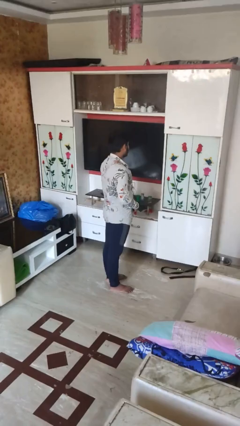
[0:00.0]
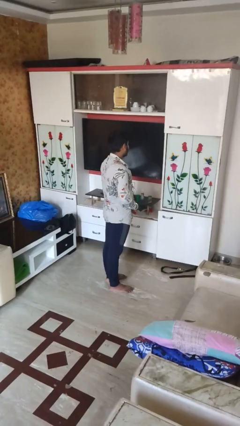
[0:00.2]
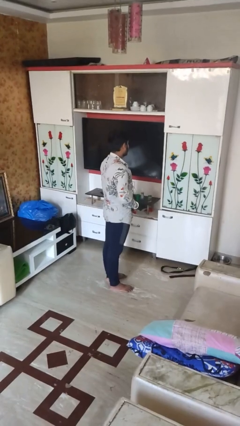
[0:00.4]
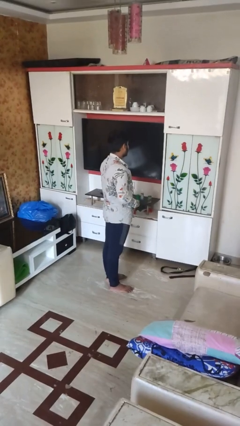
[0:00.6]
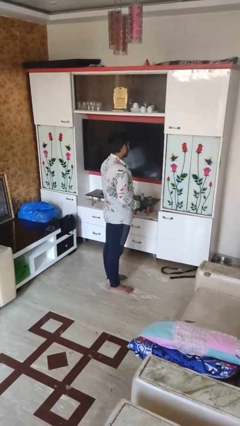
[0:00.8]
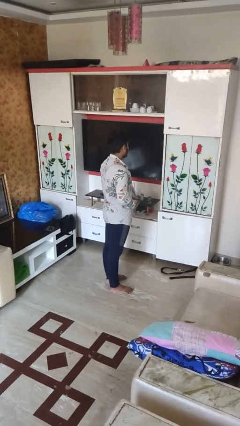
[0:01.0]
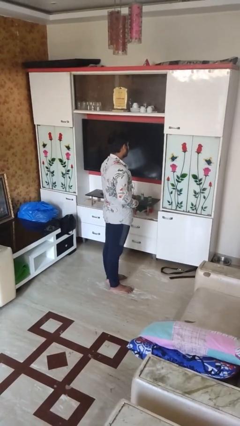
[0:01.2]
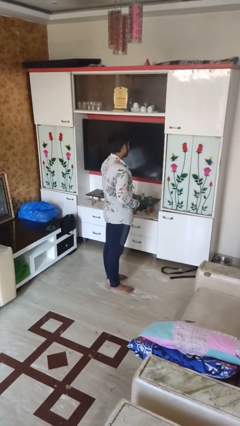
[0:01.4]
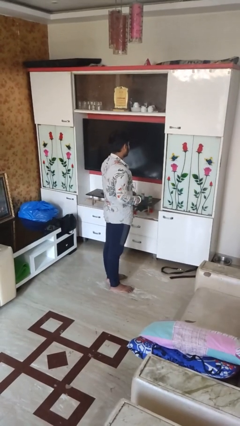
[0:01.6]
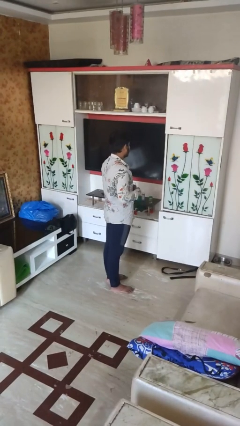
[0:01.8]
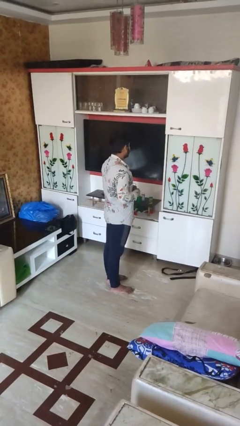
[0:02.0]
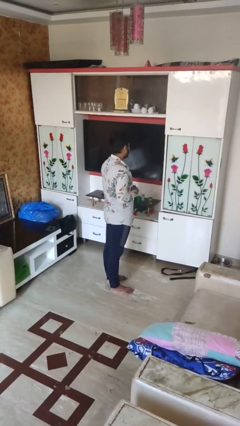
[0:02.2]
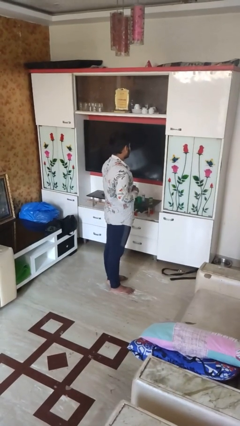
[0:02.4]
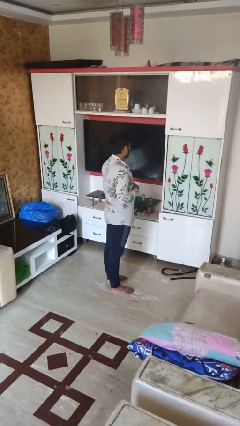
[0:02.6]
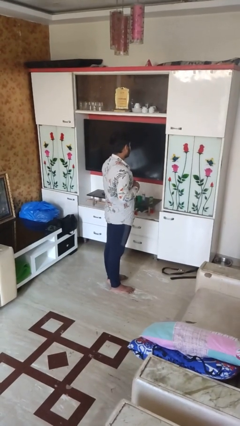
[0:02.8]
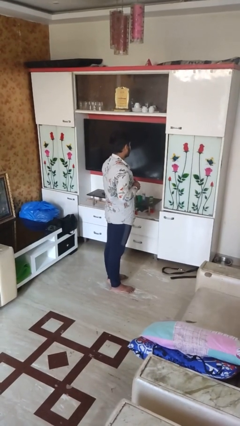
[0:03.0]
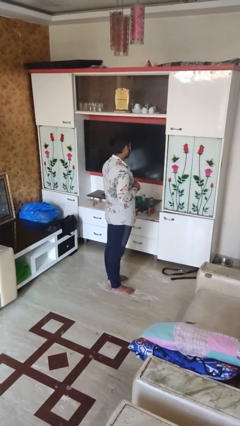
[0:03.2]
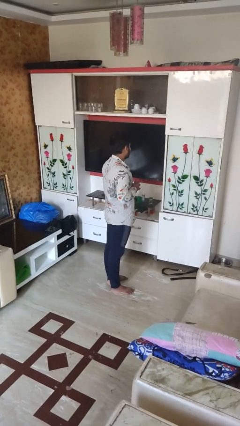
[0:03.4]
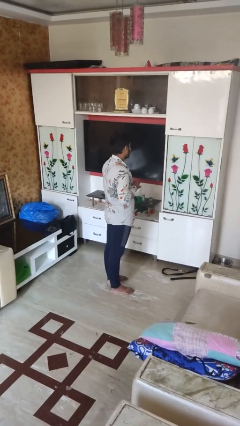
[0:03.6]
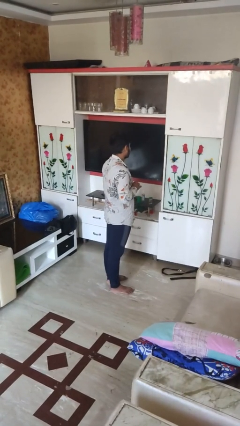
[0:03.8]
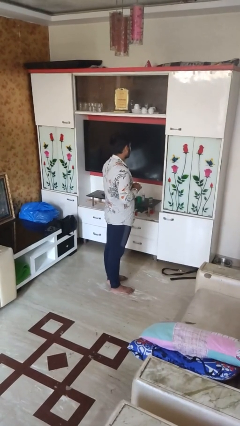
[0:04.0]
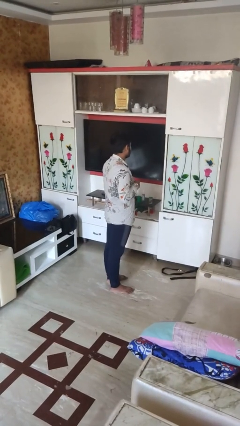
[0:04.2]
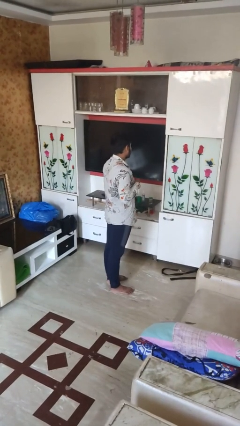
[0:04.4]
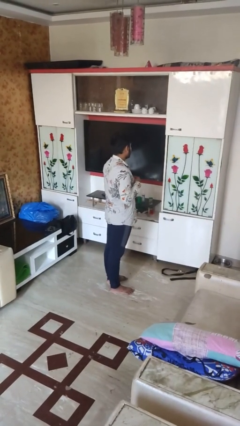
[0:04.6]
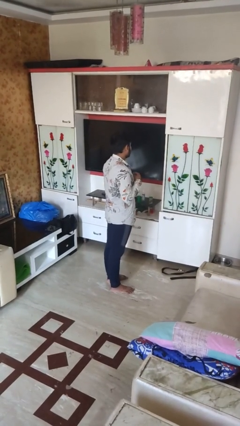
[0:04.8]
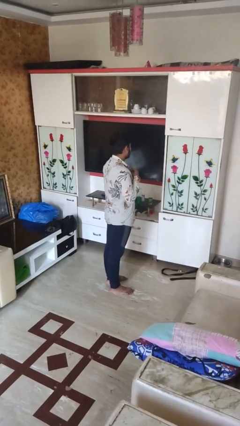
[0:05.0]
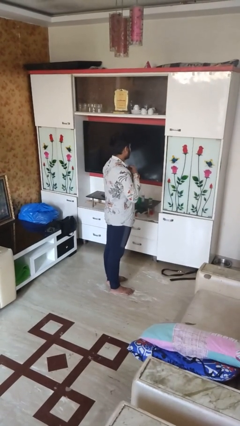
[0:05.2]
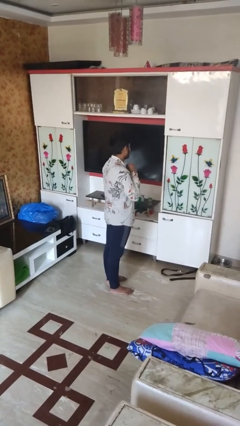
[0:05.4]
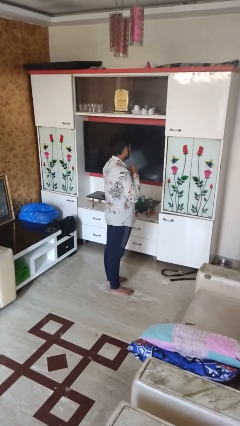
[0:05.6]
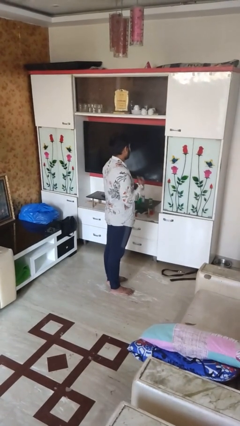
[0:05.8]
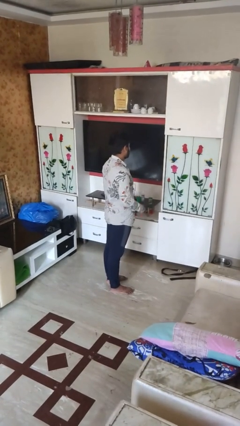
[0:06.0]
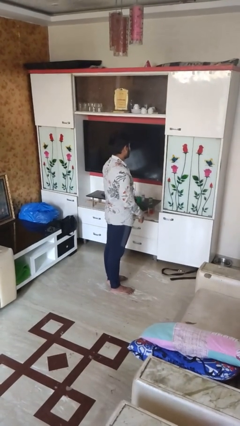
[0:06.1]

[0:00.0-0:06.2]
person buttons shirt

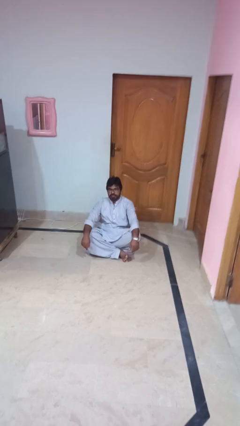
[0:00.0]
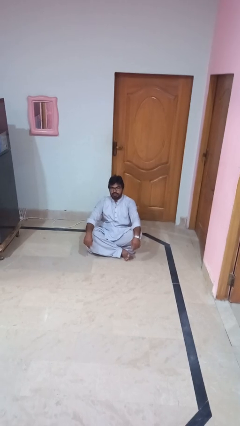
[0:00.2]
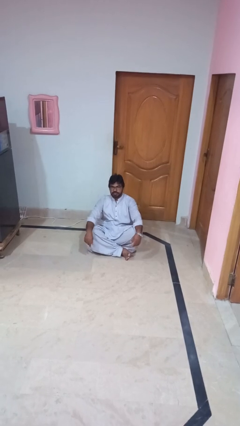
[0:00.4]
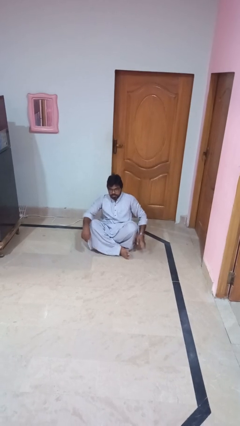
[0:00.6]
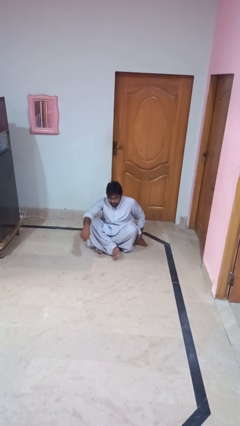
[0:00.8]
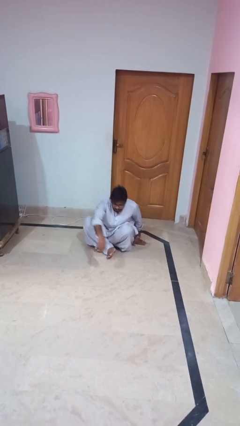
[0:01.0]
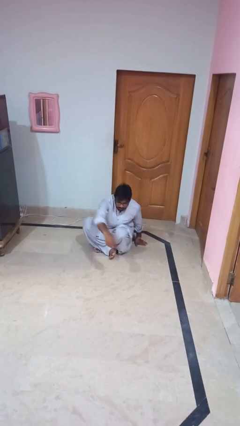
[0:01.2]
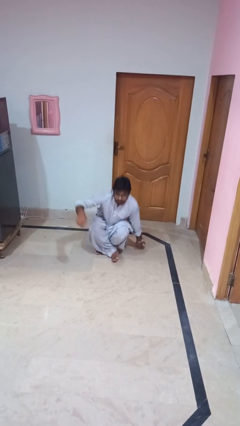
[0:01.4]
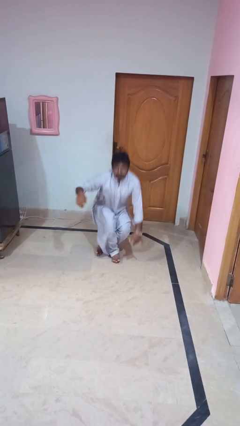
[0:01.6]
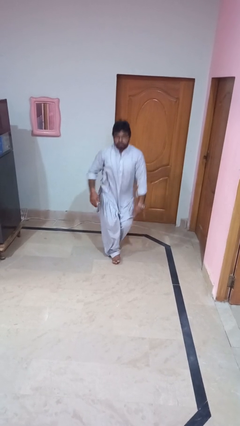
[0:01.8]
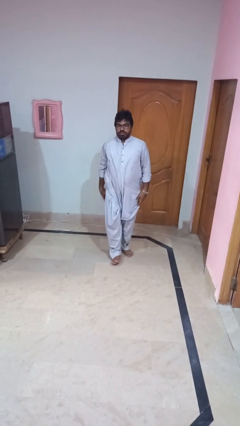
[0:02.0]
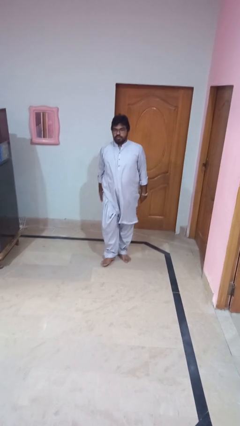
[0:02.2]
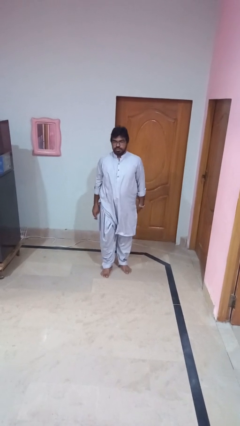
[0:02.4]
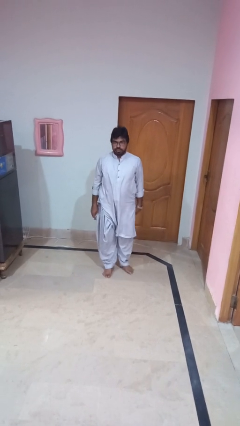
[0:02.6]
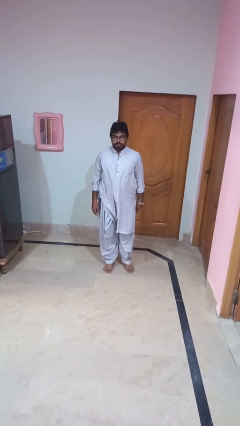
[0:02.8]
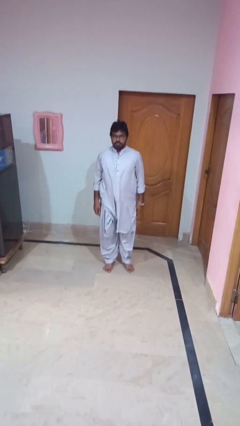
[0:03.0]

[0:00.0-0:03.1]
person stands up from floor

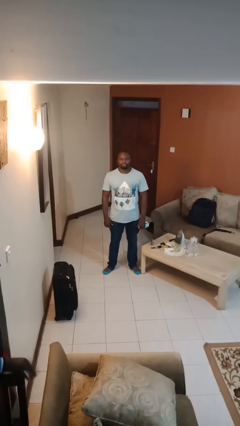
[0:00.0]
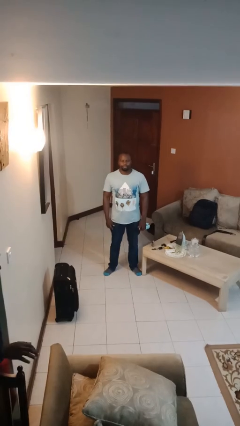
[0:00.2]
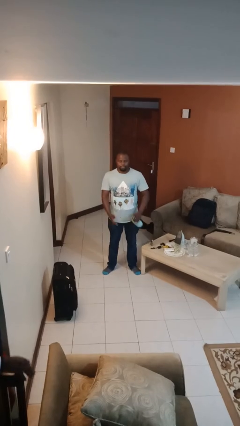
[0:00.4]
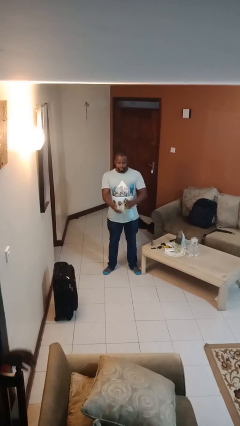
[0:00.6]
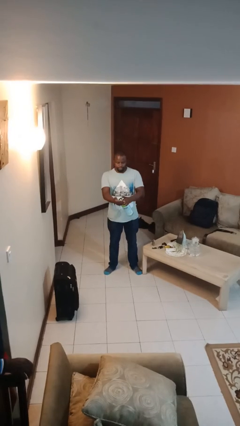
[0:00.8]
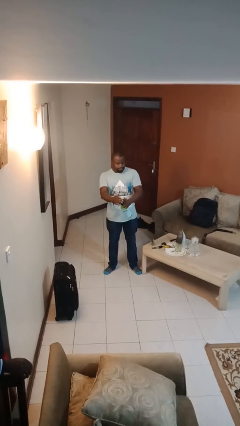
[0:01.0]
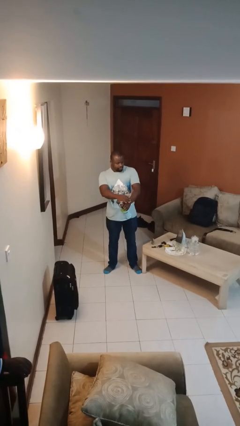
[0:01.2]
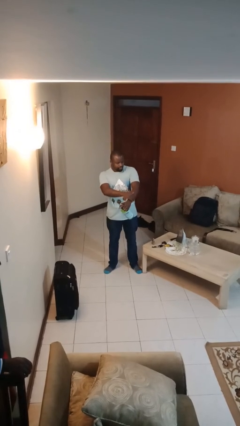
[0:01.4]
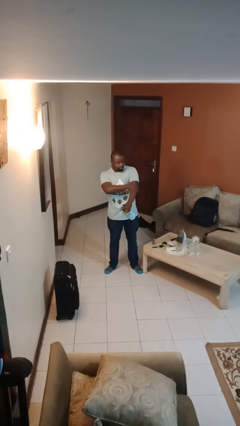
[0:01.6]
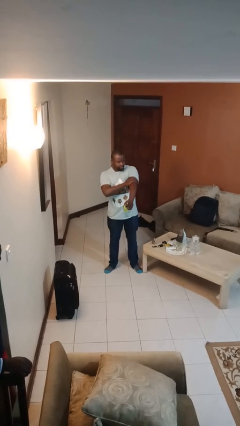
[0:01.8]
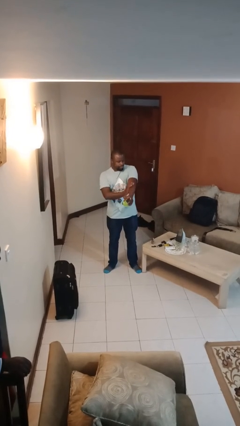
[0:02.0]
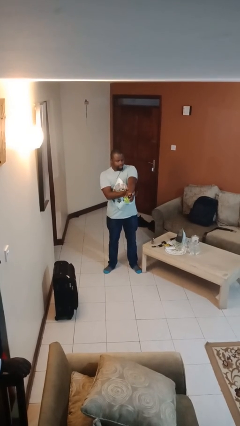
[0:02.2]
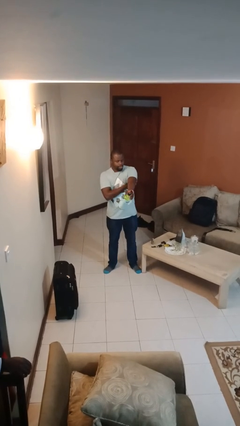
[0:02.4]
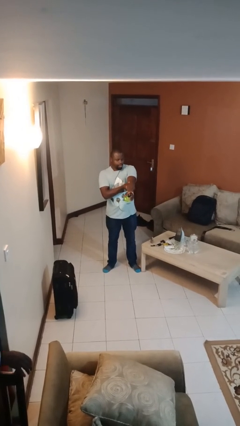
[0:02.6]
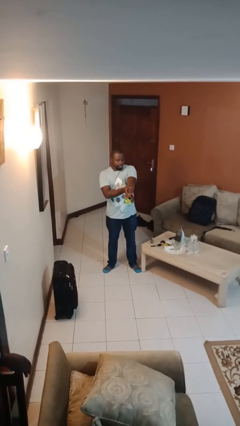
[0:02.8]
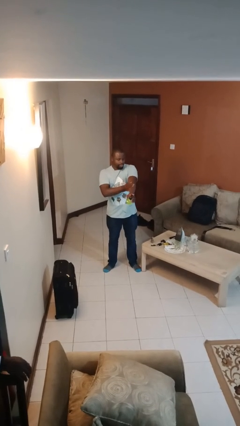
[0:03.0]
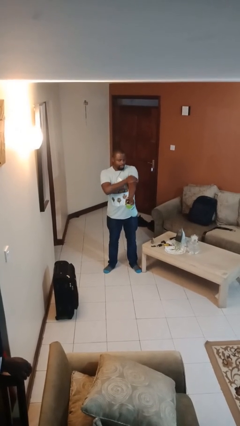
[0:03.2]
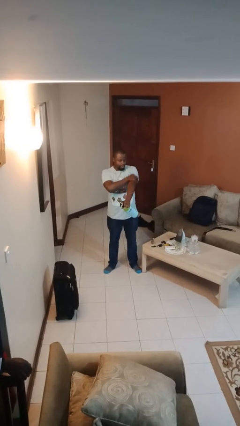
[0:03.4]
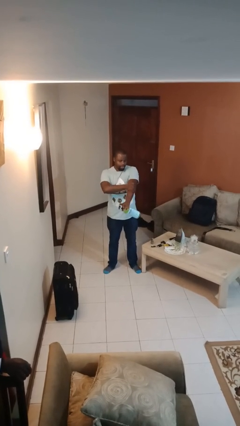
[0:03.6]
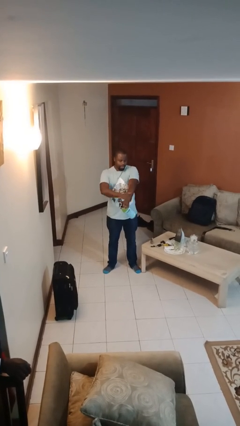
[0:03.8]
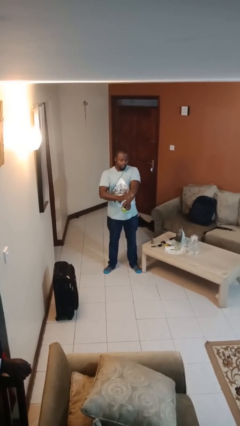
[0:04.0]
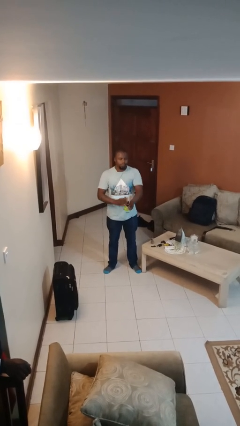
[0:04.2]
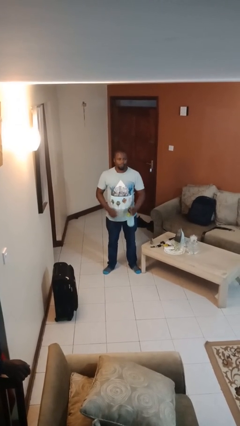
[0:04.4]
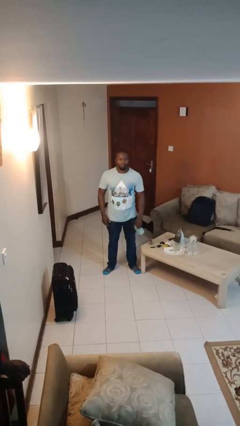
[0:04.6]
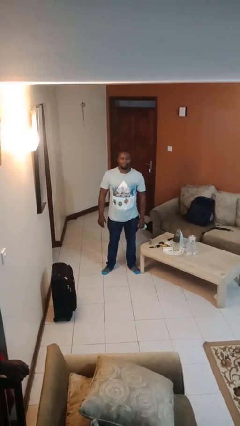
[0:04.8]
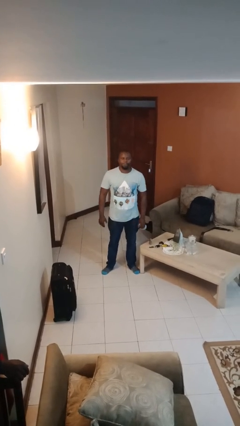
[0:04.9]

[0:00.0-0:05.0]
person applies sunscreen

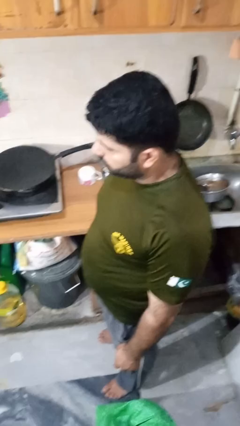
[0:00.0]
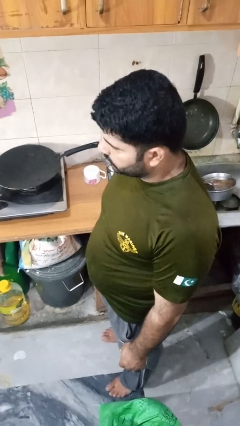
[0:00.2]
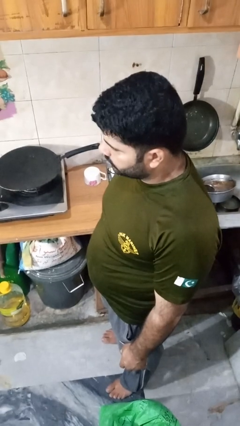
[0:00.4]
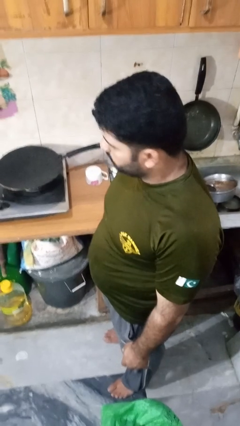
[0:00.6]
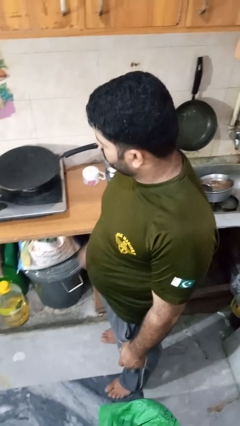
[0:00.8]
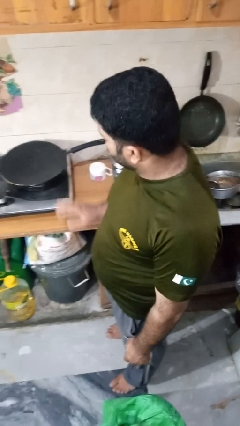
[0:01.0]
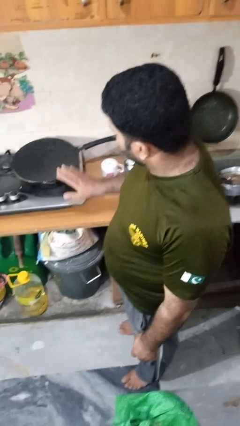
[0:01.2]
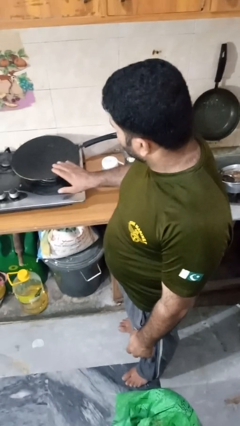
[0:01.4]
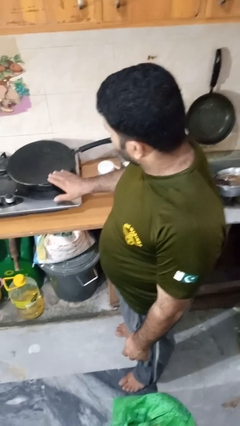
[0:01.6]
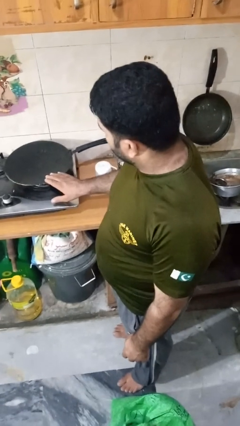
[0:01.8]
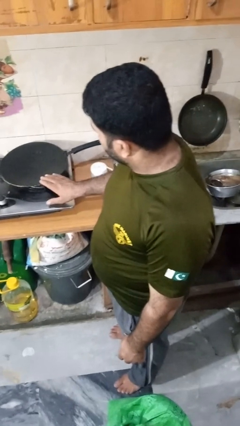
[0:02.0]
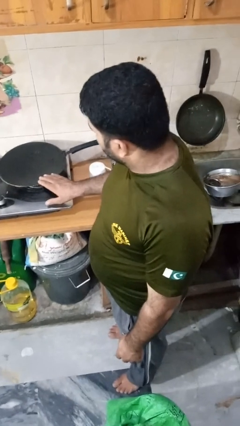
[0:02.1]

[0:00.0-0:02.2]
person burns hand

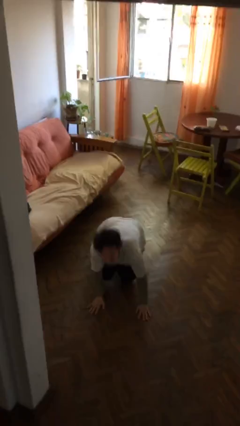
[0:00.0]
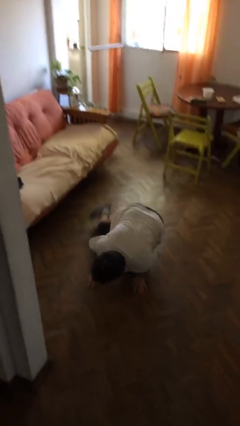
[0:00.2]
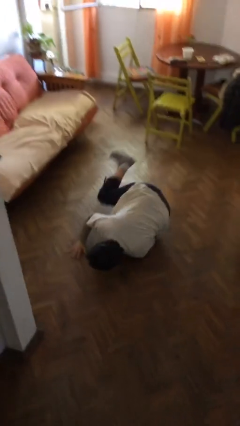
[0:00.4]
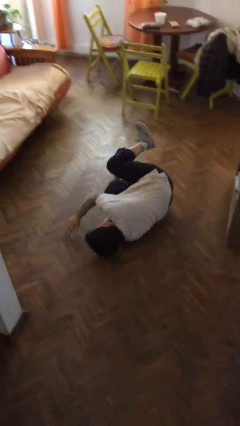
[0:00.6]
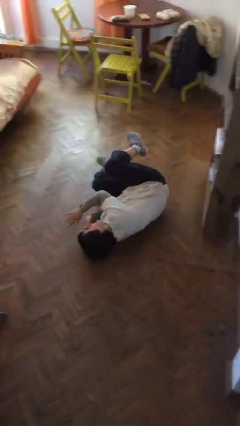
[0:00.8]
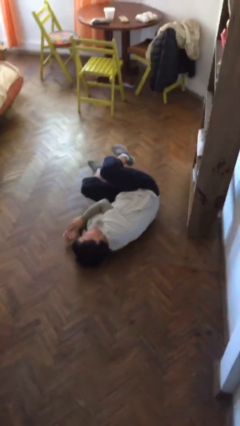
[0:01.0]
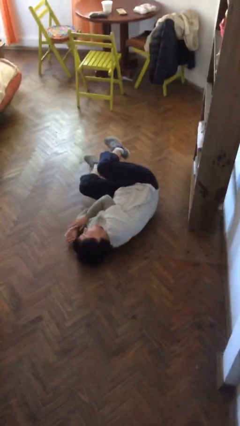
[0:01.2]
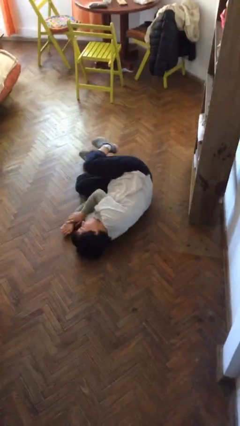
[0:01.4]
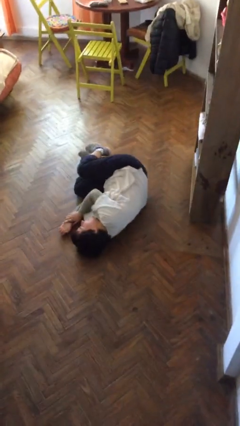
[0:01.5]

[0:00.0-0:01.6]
person falls while standing
